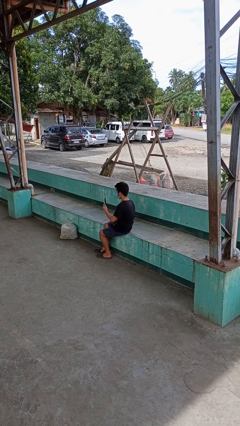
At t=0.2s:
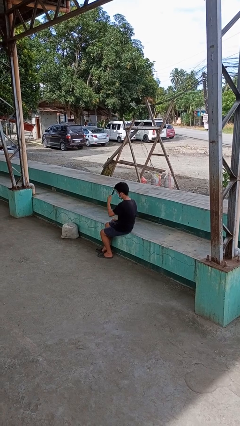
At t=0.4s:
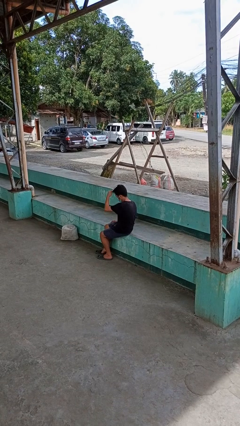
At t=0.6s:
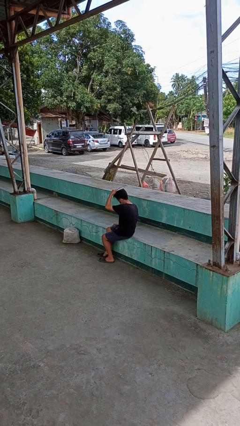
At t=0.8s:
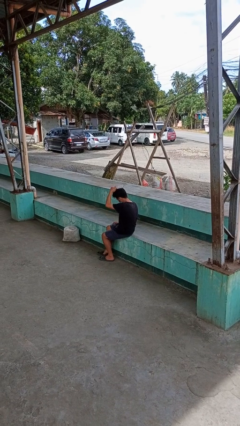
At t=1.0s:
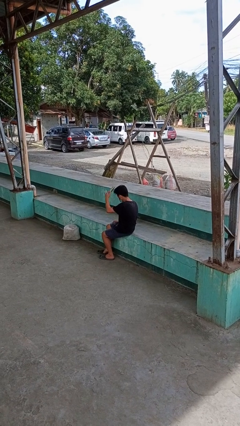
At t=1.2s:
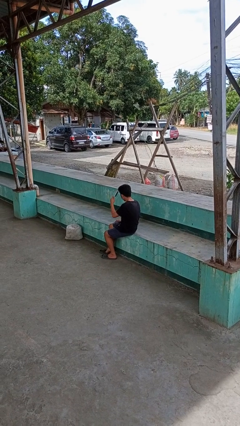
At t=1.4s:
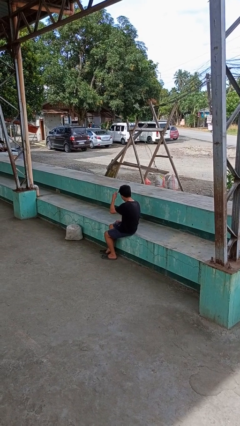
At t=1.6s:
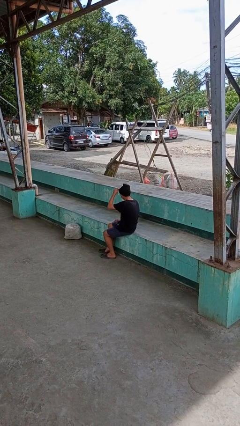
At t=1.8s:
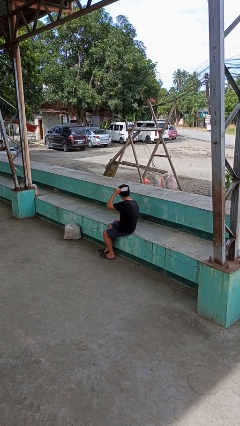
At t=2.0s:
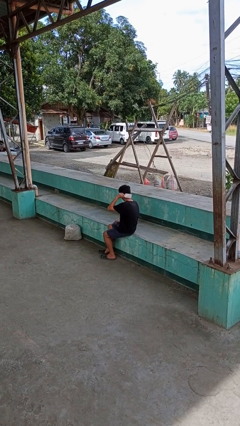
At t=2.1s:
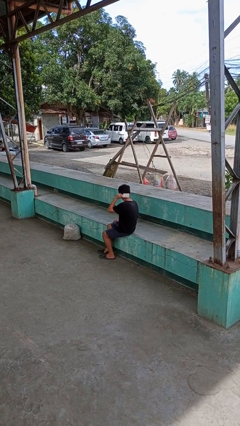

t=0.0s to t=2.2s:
person brushes hair

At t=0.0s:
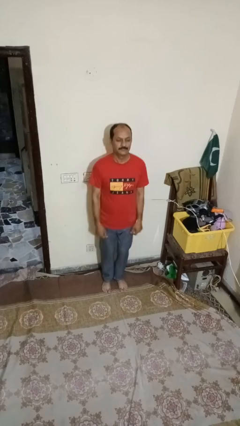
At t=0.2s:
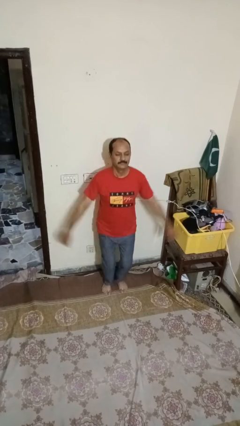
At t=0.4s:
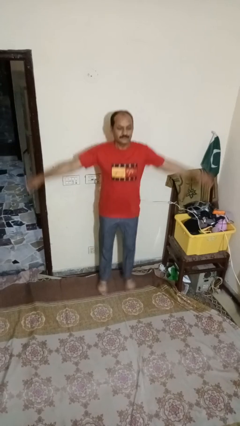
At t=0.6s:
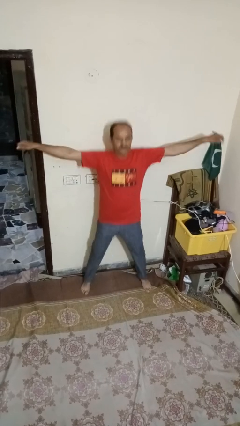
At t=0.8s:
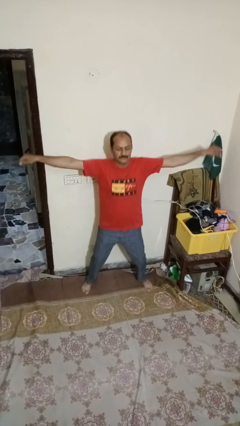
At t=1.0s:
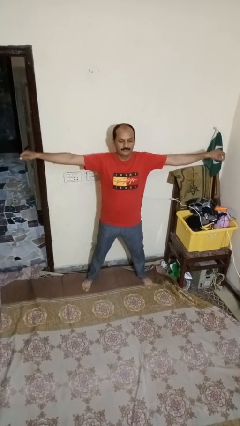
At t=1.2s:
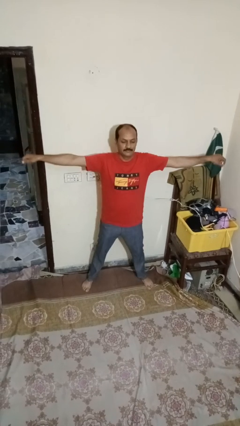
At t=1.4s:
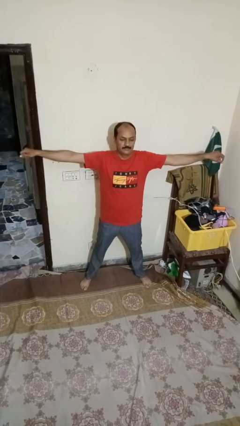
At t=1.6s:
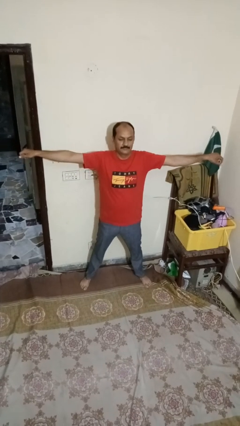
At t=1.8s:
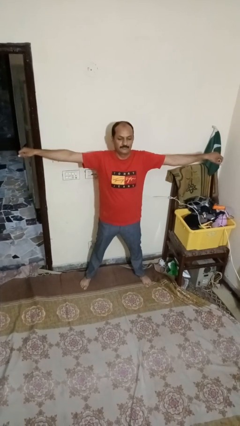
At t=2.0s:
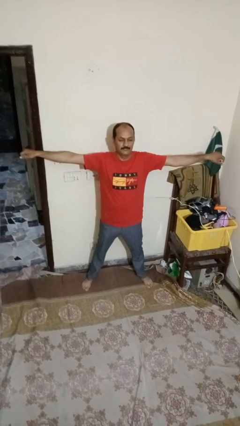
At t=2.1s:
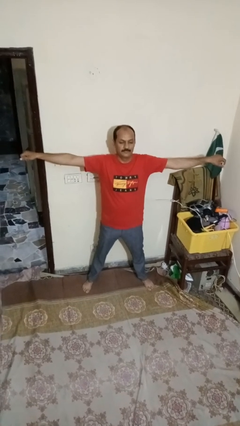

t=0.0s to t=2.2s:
person exercises with jumping jacks

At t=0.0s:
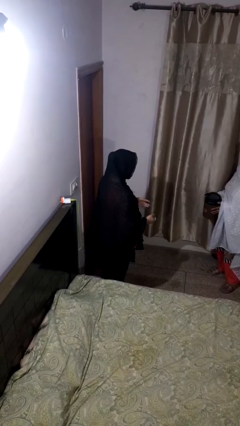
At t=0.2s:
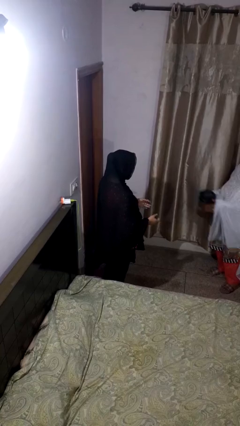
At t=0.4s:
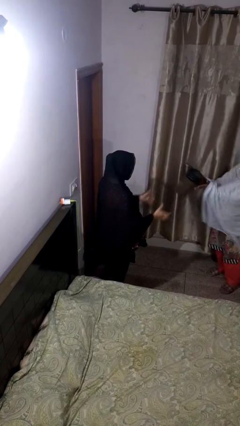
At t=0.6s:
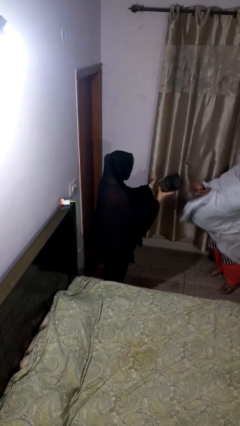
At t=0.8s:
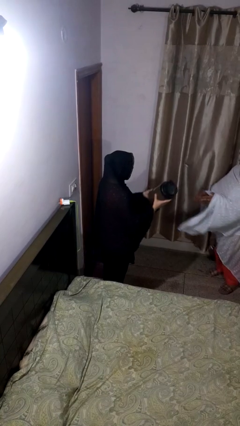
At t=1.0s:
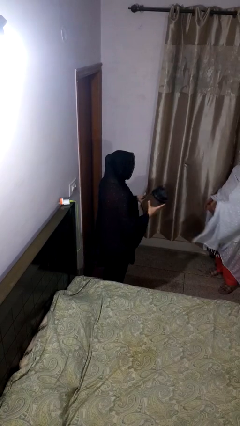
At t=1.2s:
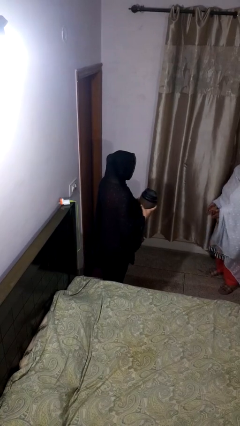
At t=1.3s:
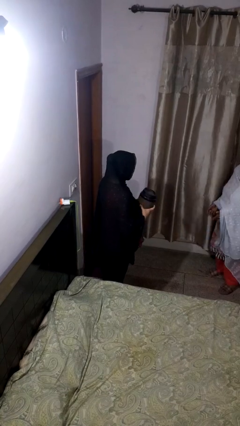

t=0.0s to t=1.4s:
person catches object from person

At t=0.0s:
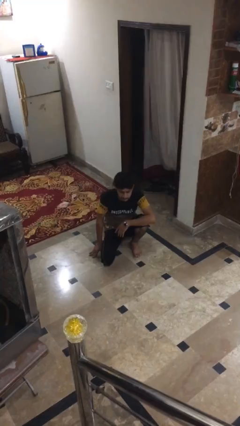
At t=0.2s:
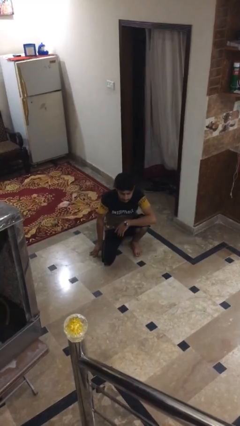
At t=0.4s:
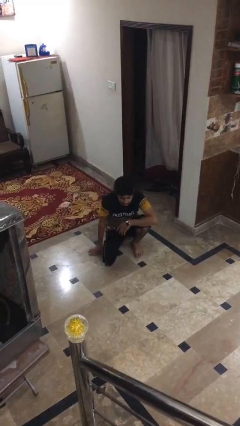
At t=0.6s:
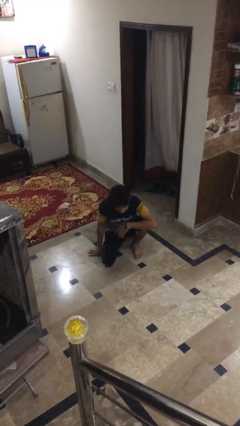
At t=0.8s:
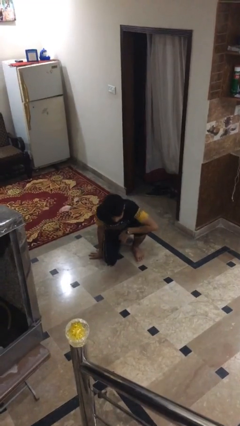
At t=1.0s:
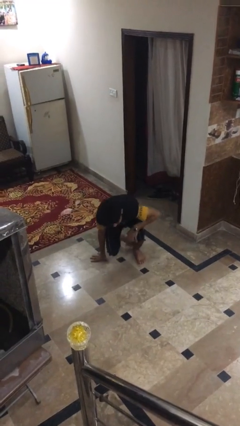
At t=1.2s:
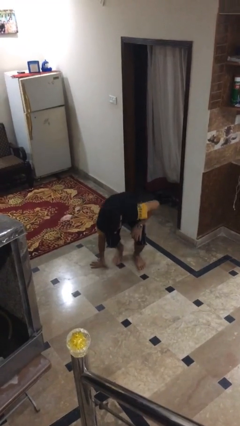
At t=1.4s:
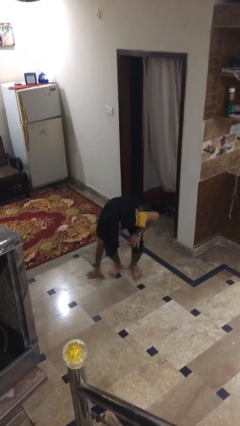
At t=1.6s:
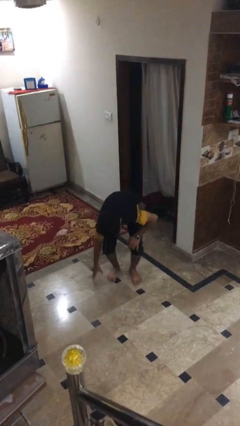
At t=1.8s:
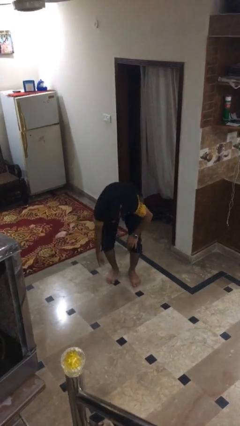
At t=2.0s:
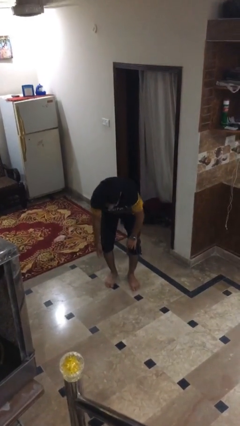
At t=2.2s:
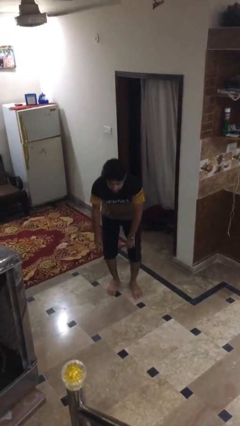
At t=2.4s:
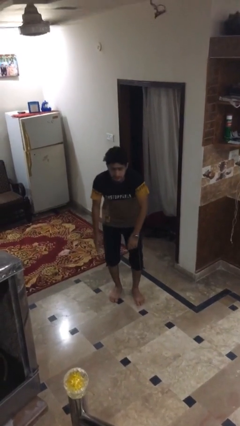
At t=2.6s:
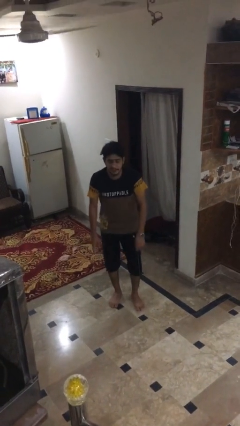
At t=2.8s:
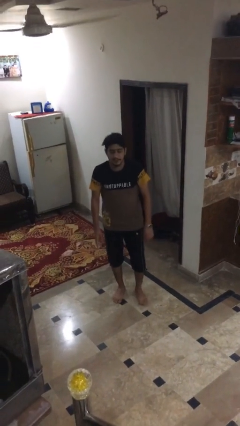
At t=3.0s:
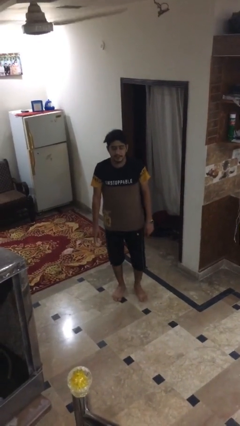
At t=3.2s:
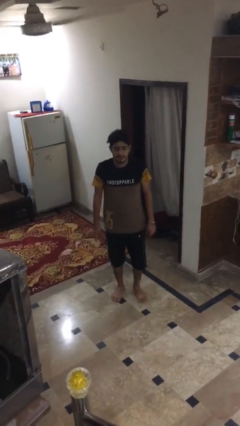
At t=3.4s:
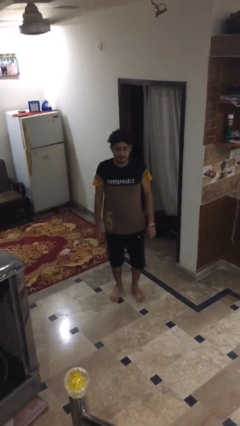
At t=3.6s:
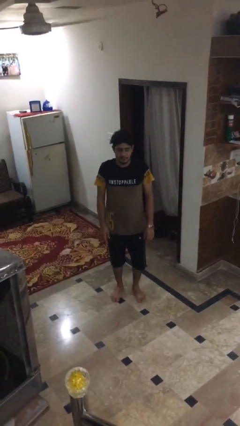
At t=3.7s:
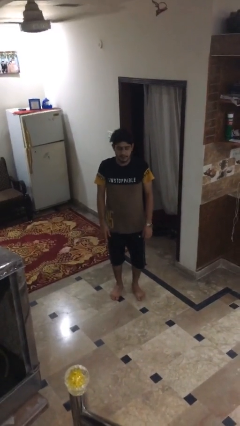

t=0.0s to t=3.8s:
person stands up from floor

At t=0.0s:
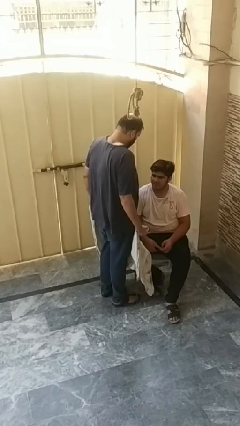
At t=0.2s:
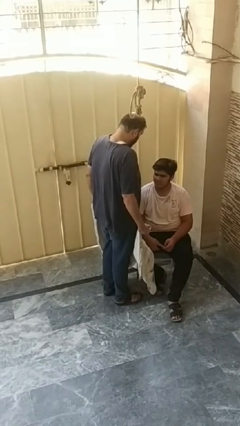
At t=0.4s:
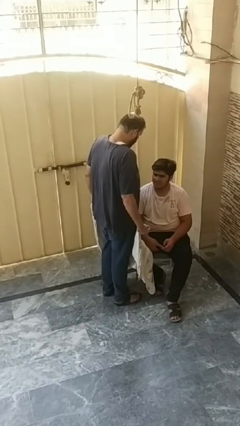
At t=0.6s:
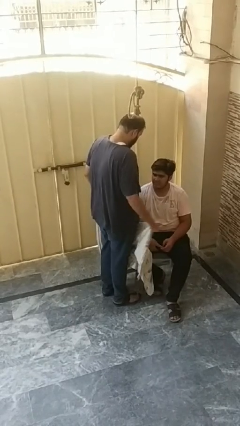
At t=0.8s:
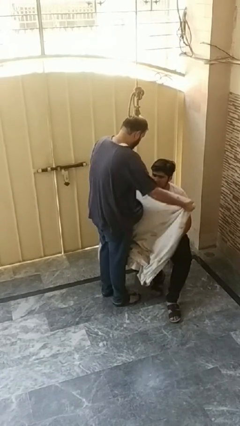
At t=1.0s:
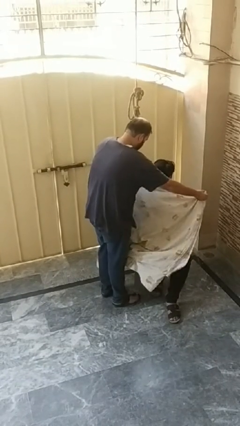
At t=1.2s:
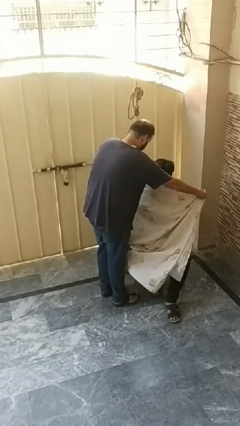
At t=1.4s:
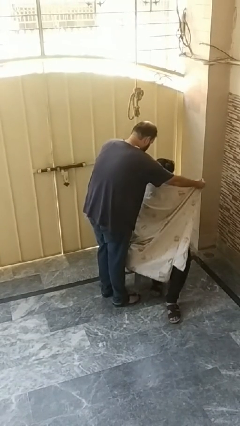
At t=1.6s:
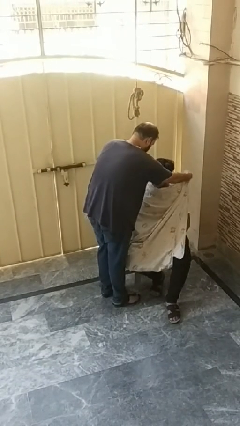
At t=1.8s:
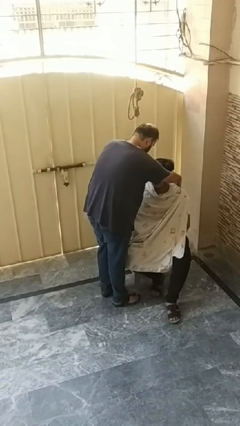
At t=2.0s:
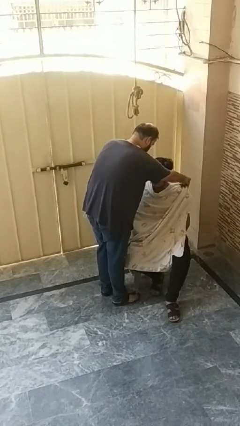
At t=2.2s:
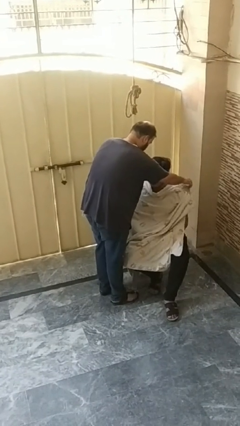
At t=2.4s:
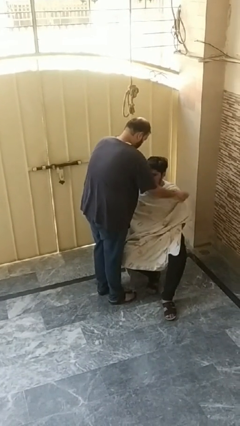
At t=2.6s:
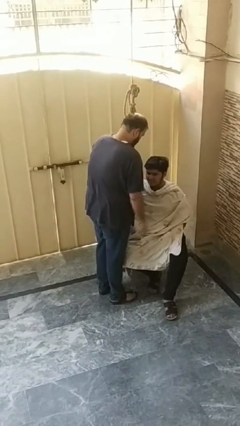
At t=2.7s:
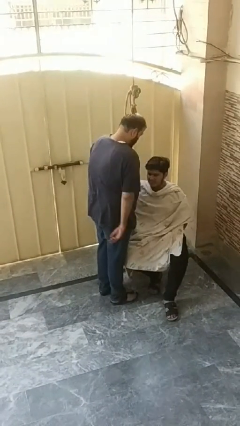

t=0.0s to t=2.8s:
person covers friend with blanket

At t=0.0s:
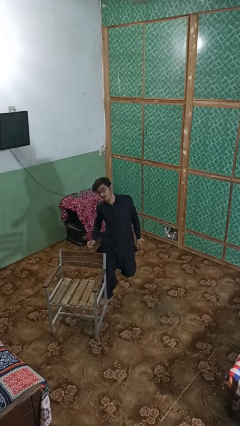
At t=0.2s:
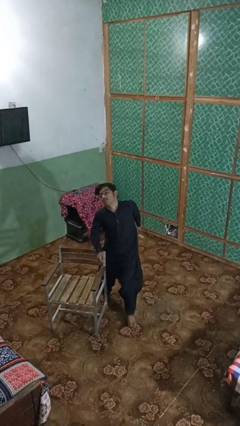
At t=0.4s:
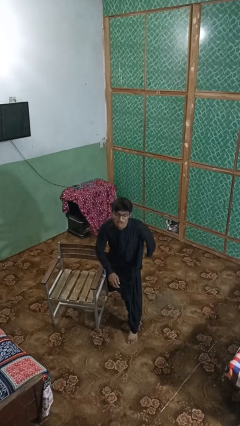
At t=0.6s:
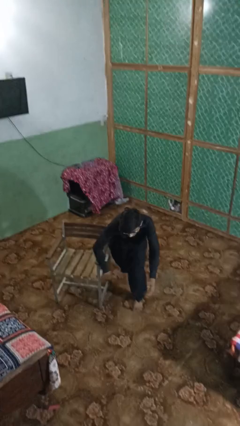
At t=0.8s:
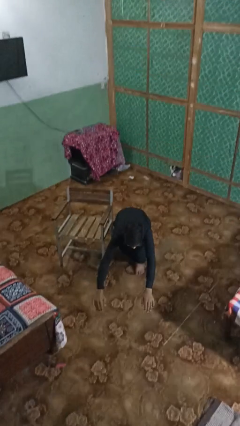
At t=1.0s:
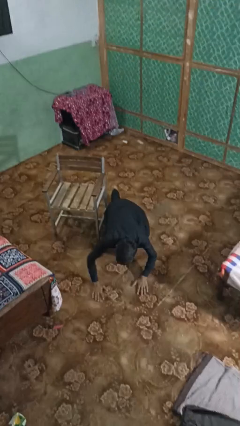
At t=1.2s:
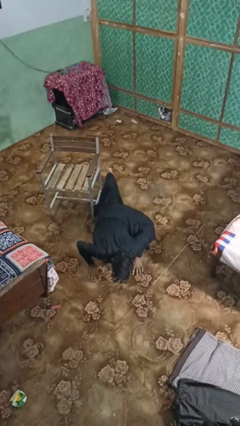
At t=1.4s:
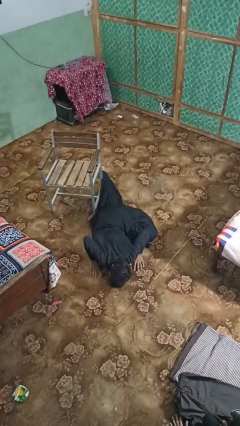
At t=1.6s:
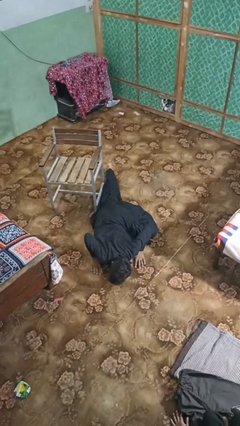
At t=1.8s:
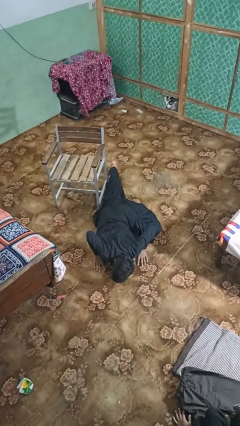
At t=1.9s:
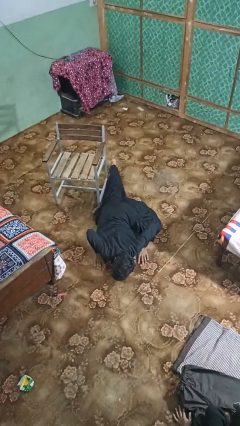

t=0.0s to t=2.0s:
person lies down on floor

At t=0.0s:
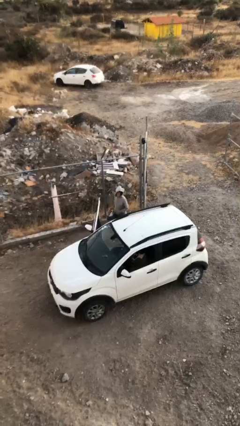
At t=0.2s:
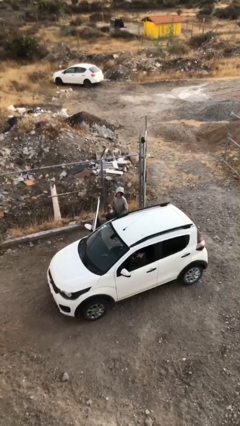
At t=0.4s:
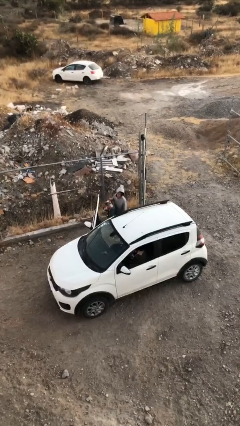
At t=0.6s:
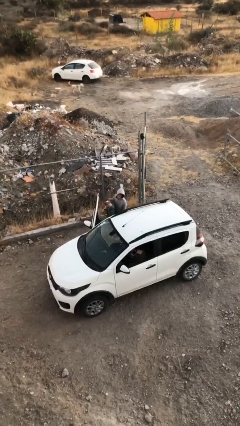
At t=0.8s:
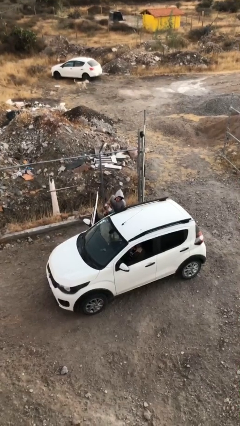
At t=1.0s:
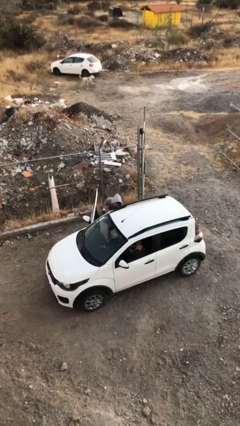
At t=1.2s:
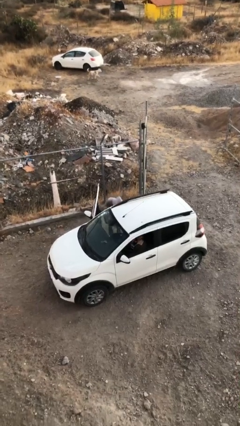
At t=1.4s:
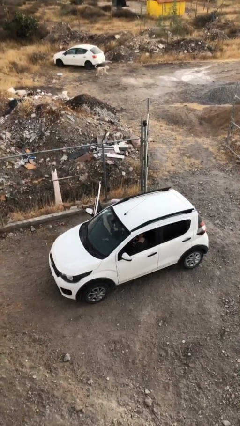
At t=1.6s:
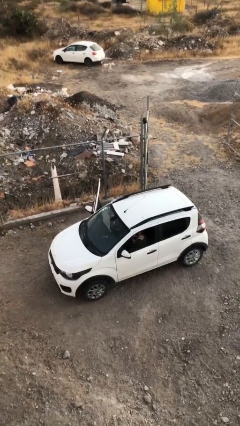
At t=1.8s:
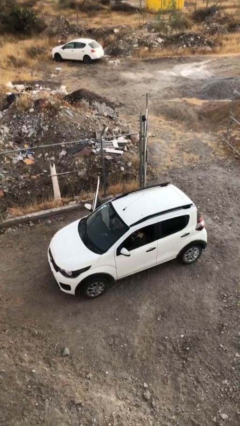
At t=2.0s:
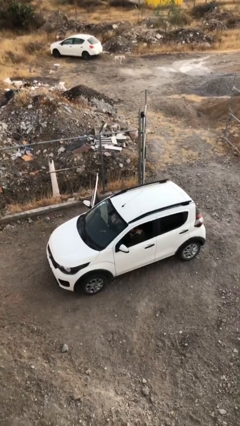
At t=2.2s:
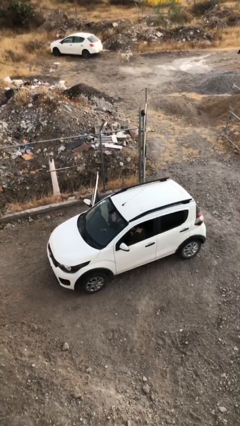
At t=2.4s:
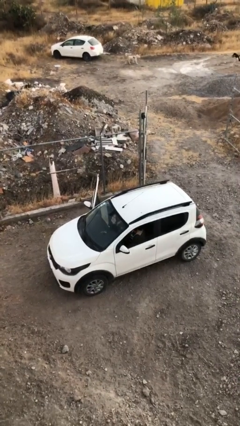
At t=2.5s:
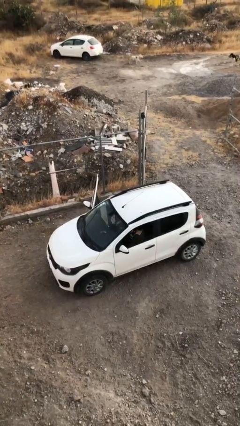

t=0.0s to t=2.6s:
person loads car

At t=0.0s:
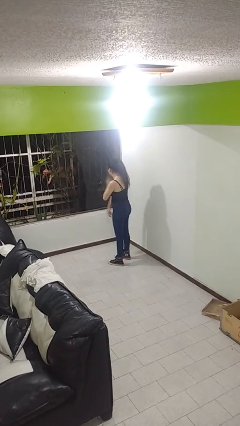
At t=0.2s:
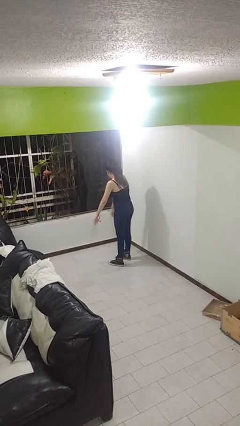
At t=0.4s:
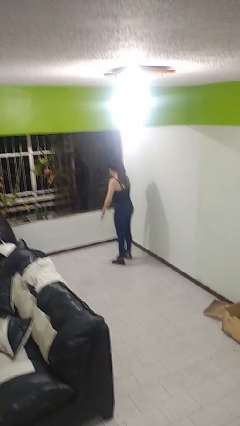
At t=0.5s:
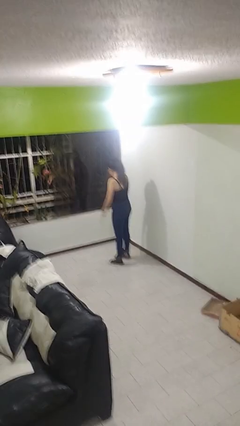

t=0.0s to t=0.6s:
person swats bug
